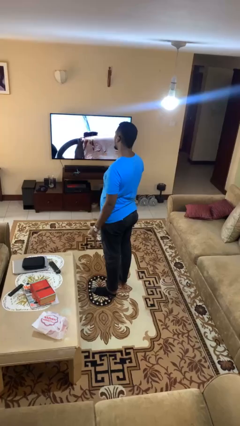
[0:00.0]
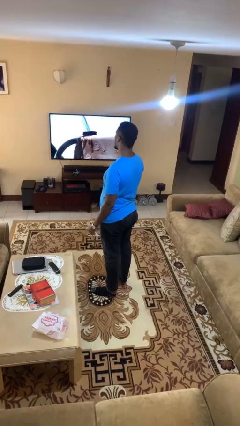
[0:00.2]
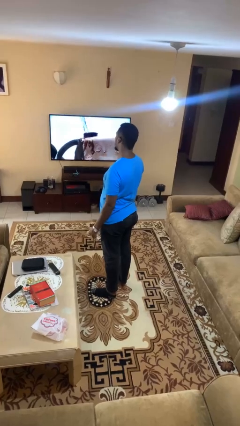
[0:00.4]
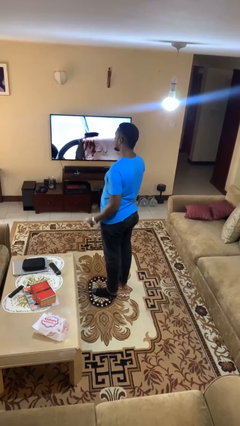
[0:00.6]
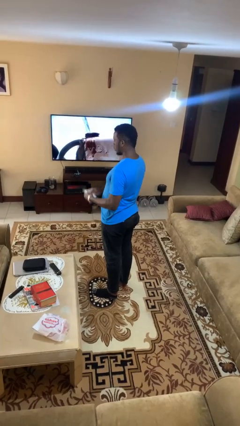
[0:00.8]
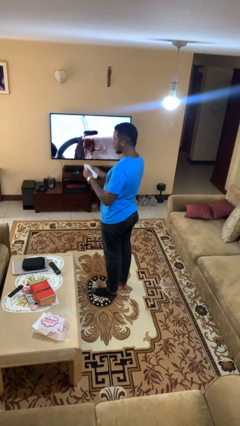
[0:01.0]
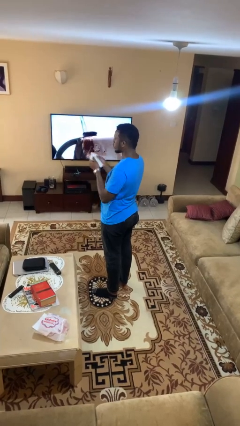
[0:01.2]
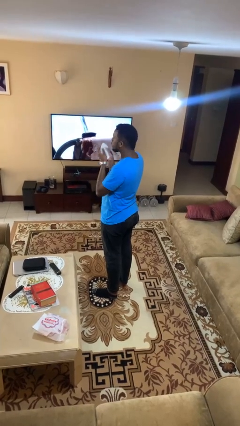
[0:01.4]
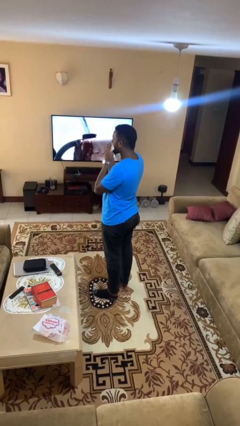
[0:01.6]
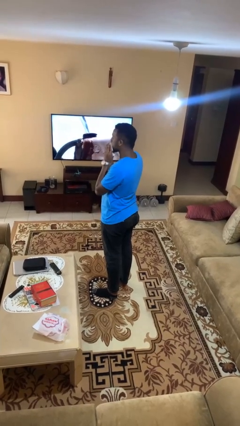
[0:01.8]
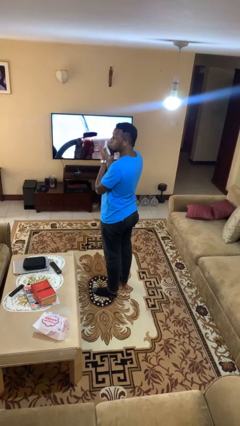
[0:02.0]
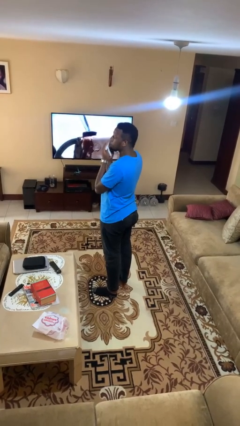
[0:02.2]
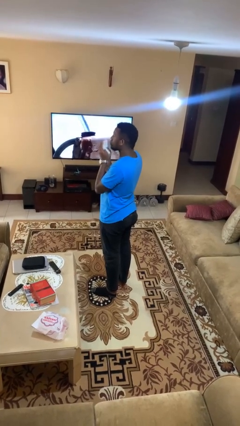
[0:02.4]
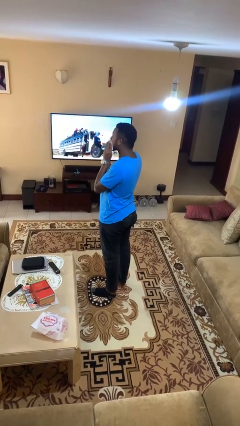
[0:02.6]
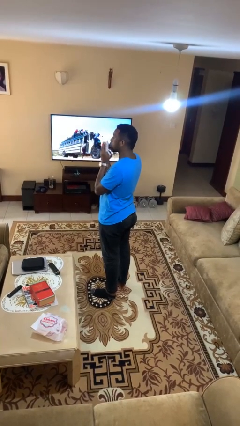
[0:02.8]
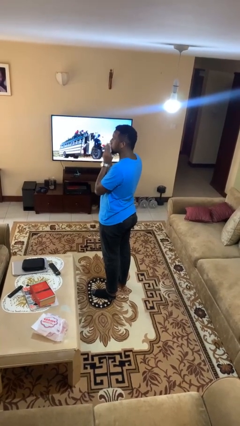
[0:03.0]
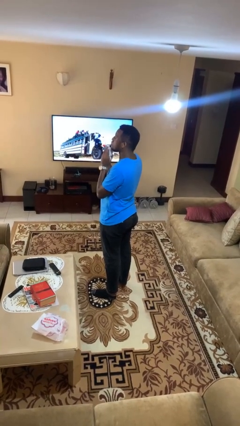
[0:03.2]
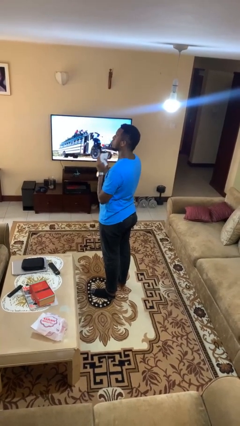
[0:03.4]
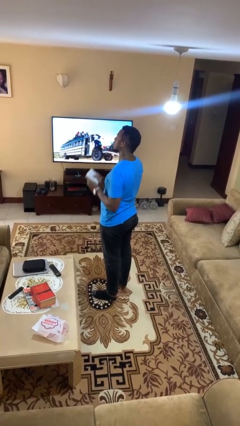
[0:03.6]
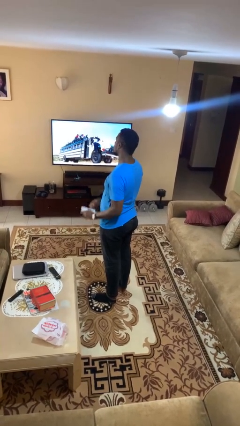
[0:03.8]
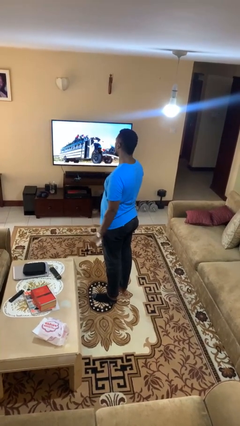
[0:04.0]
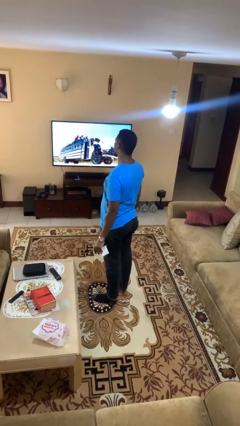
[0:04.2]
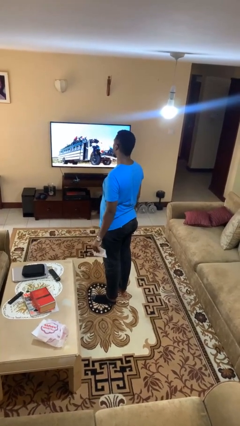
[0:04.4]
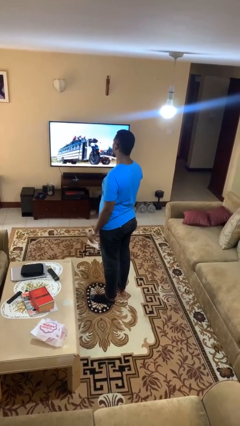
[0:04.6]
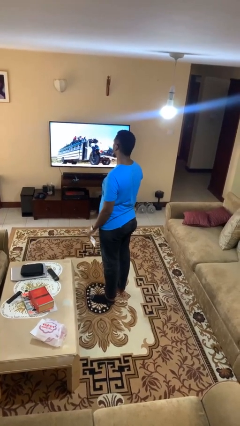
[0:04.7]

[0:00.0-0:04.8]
person wipes mouth with napkin

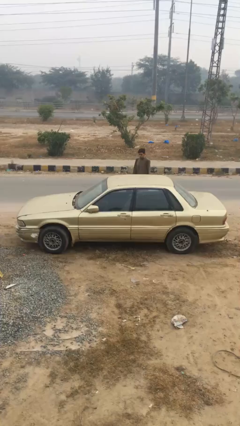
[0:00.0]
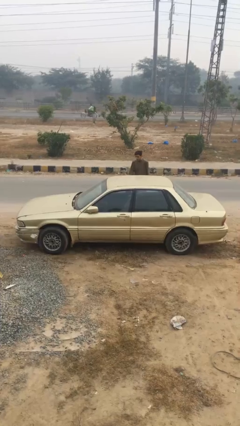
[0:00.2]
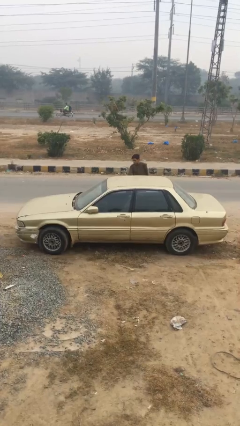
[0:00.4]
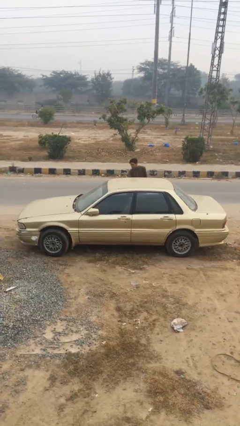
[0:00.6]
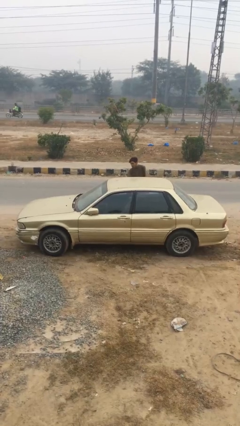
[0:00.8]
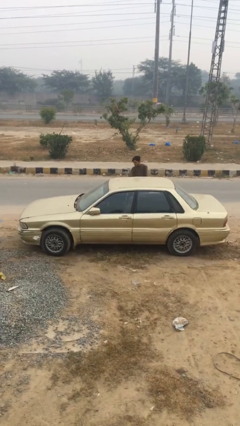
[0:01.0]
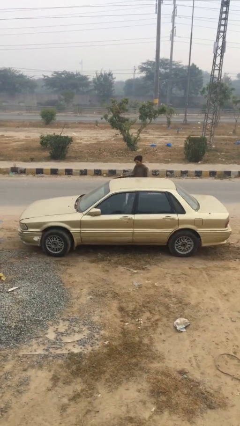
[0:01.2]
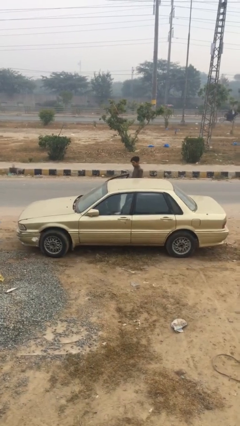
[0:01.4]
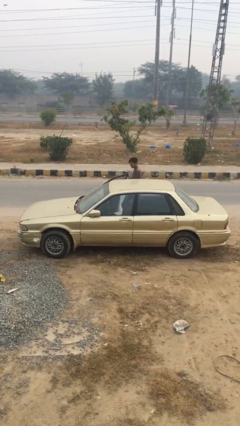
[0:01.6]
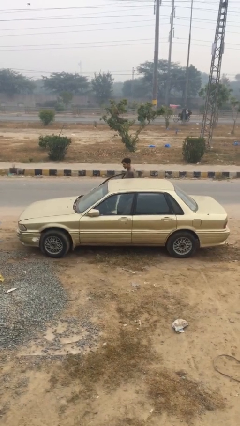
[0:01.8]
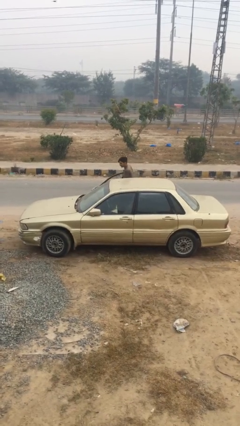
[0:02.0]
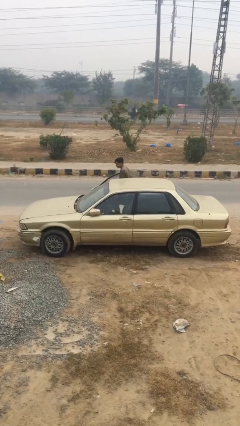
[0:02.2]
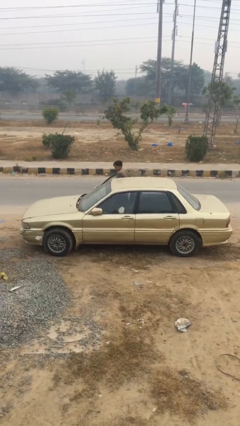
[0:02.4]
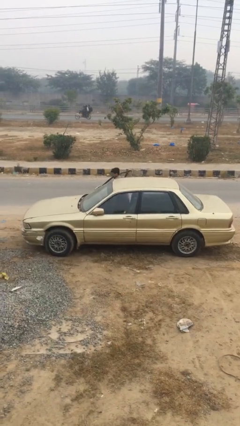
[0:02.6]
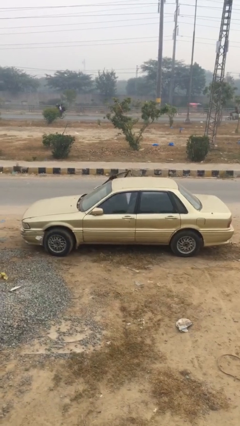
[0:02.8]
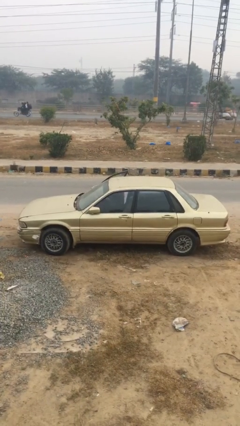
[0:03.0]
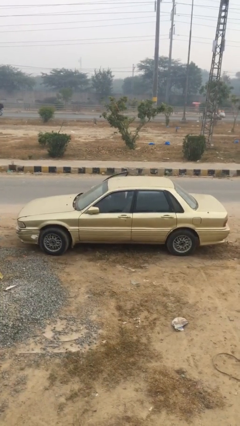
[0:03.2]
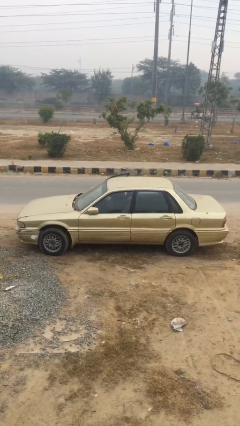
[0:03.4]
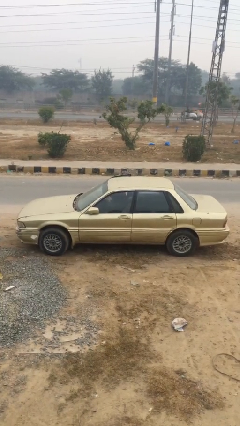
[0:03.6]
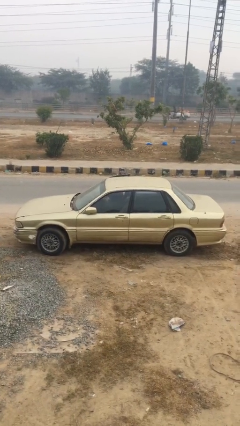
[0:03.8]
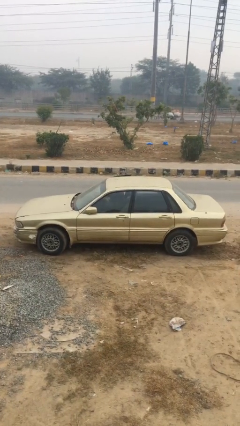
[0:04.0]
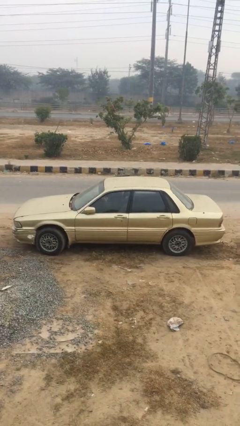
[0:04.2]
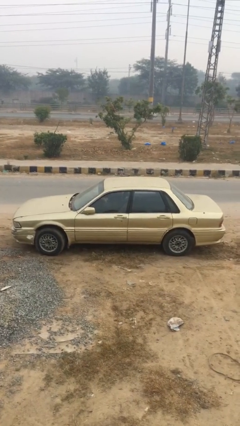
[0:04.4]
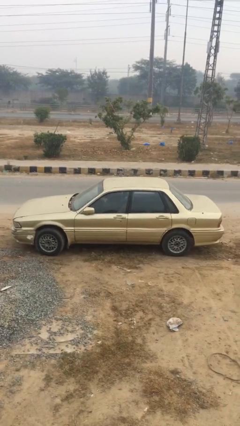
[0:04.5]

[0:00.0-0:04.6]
car picks up person

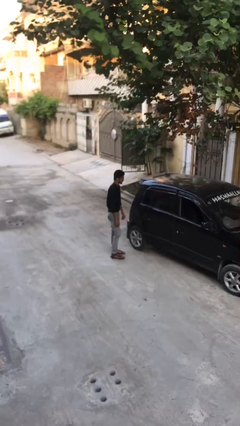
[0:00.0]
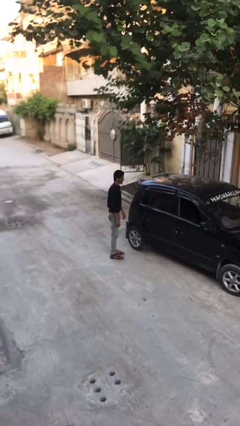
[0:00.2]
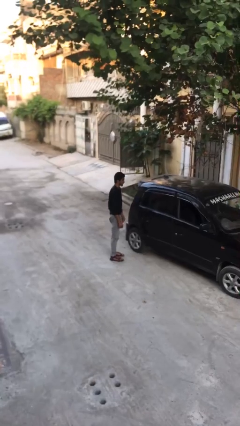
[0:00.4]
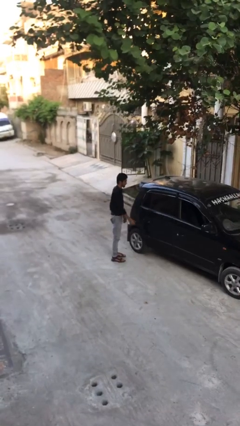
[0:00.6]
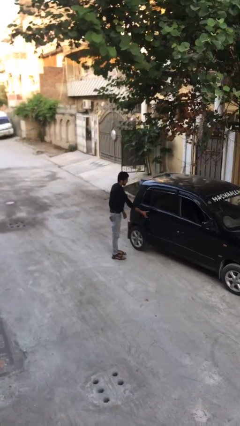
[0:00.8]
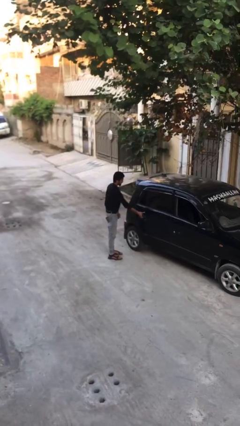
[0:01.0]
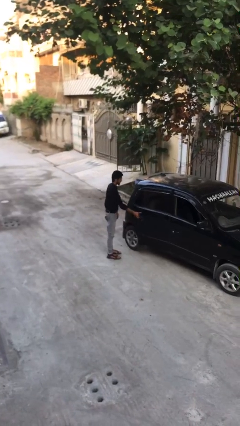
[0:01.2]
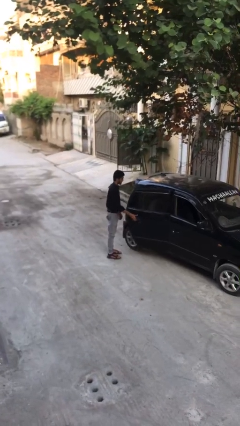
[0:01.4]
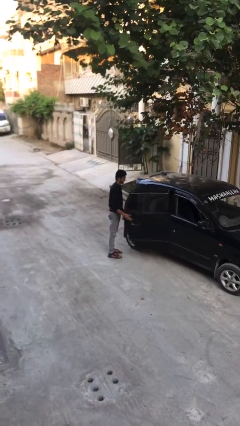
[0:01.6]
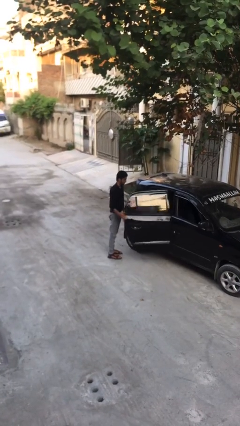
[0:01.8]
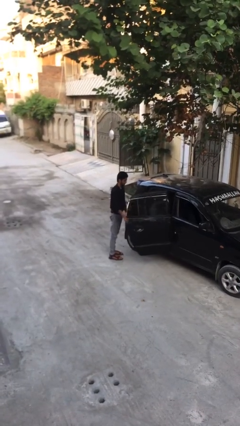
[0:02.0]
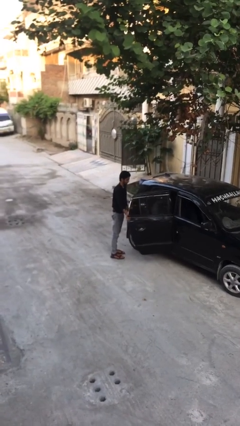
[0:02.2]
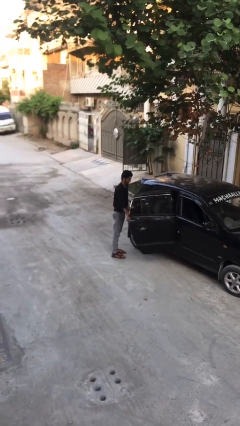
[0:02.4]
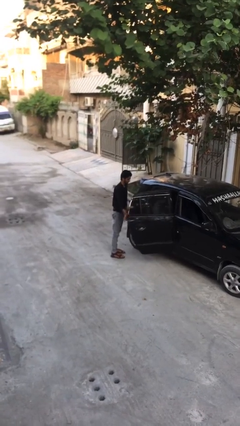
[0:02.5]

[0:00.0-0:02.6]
person opens car door

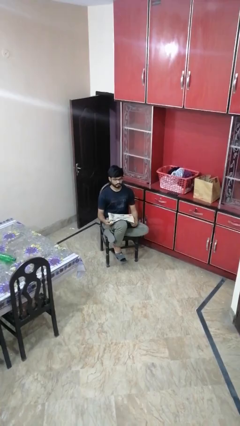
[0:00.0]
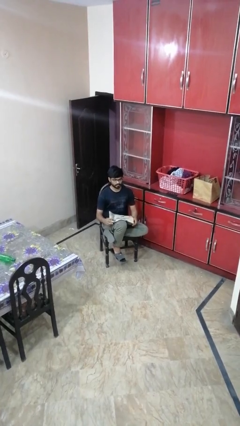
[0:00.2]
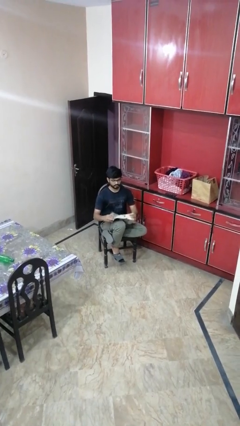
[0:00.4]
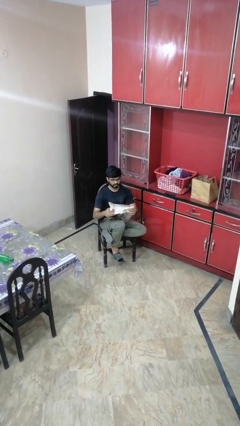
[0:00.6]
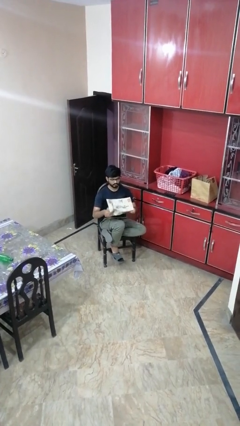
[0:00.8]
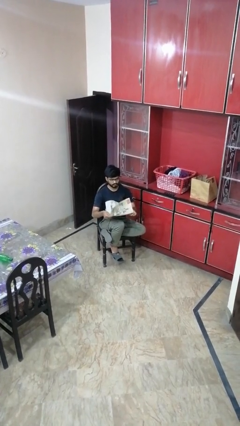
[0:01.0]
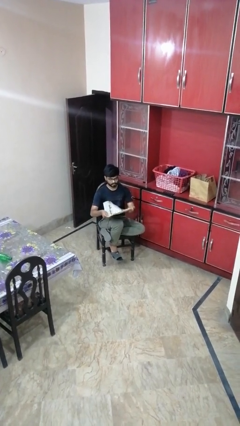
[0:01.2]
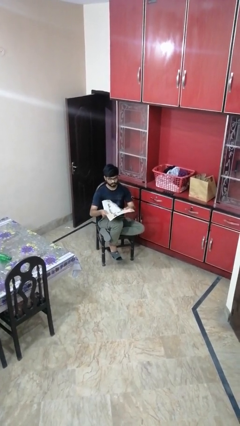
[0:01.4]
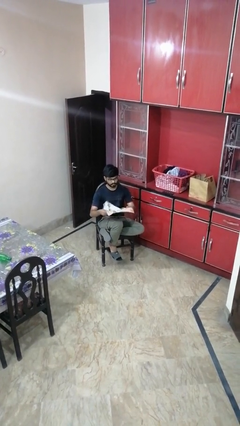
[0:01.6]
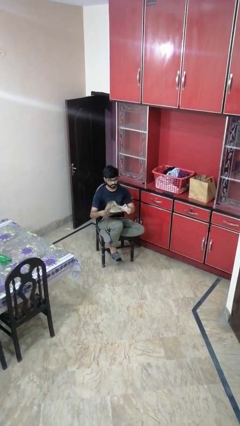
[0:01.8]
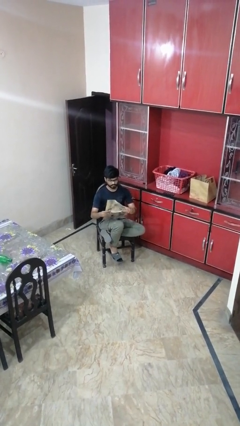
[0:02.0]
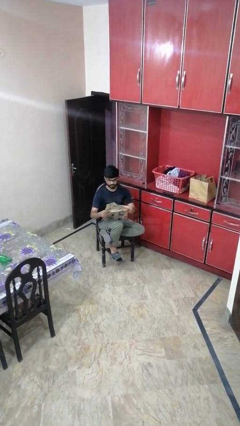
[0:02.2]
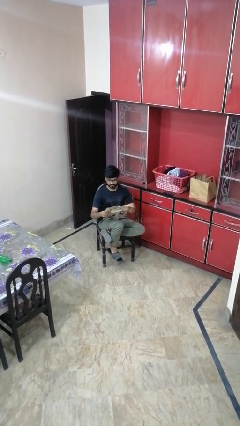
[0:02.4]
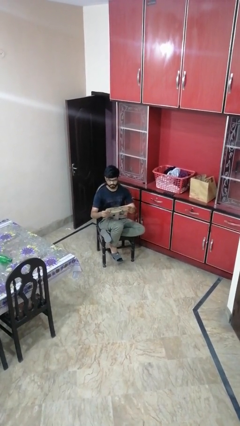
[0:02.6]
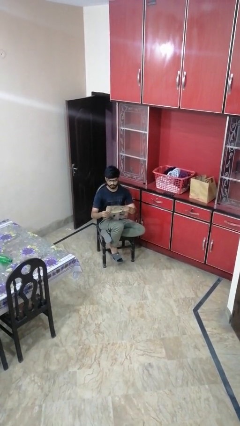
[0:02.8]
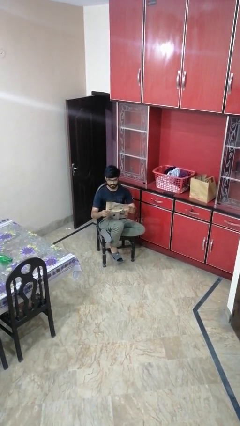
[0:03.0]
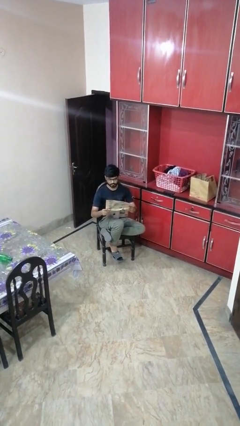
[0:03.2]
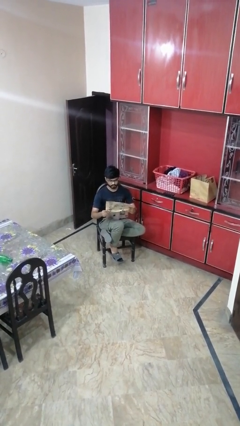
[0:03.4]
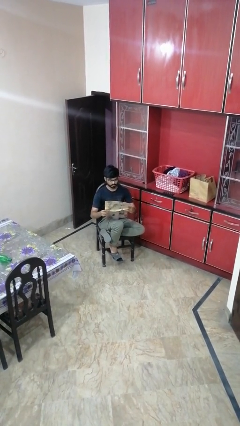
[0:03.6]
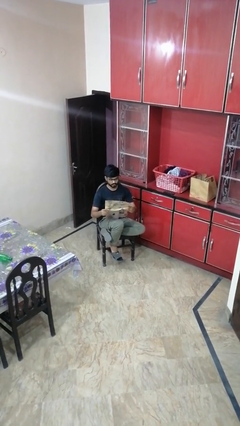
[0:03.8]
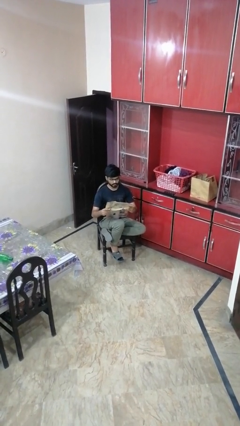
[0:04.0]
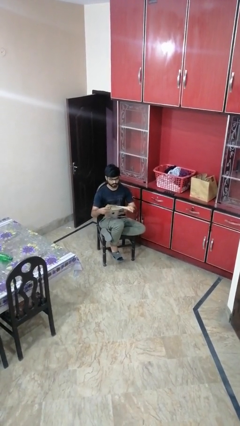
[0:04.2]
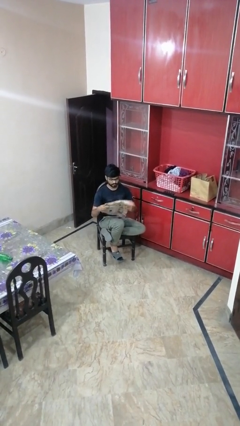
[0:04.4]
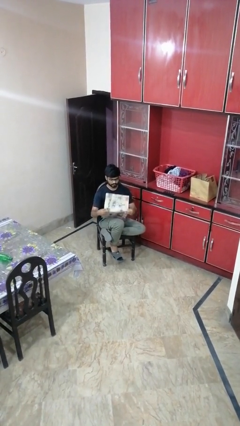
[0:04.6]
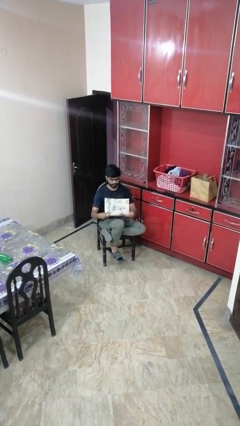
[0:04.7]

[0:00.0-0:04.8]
person reads newspaper

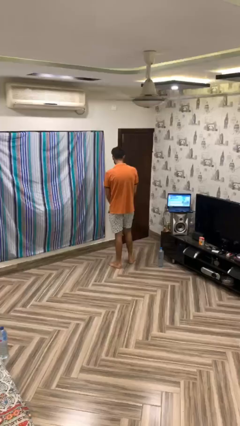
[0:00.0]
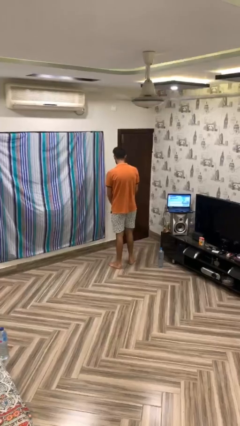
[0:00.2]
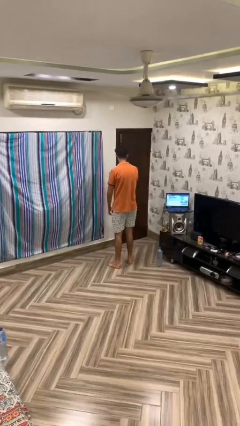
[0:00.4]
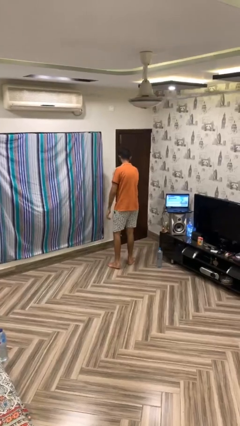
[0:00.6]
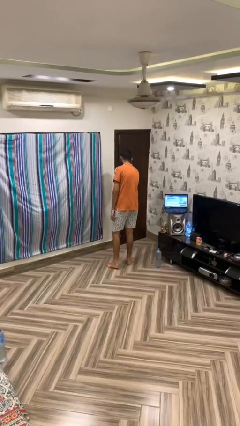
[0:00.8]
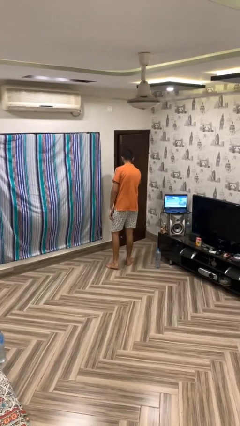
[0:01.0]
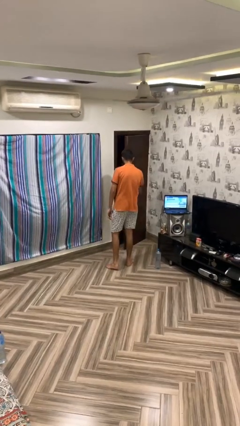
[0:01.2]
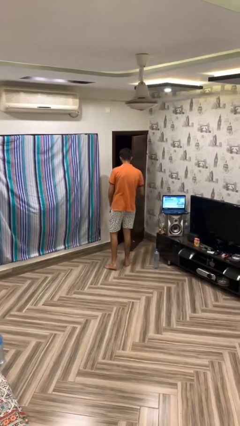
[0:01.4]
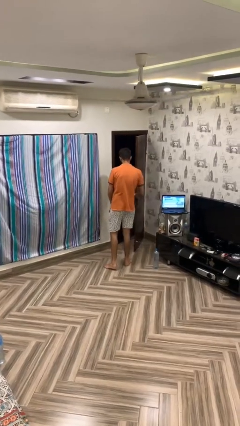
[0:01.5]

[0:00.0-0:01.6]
person opens facility door
